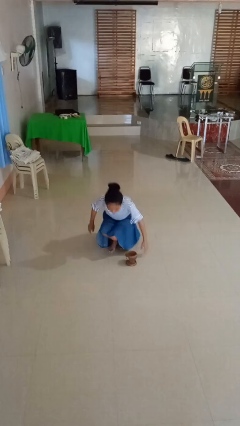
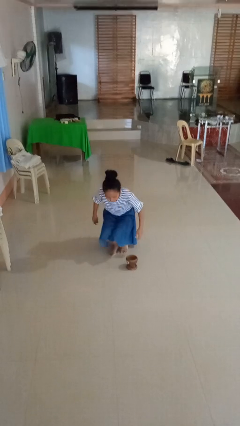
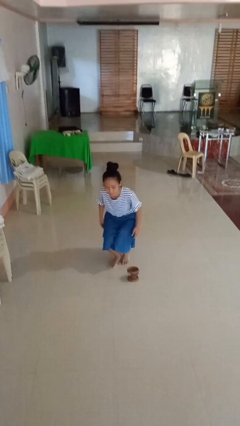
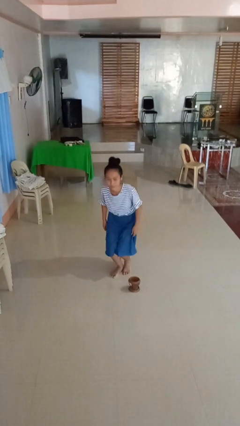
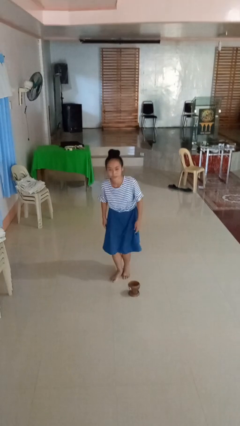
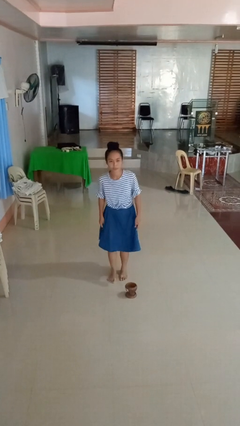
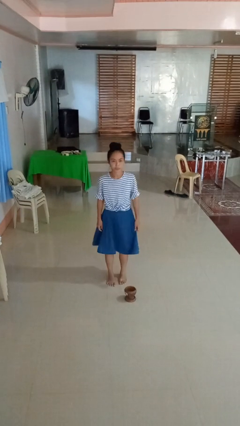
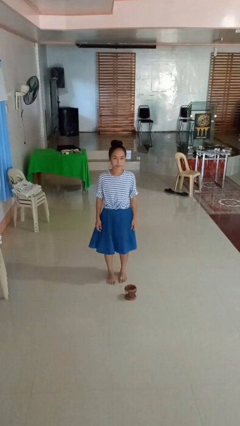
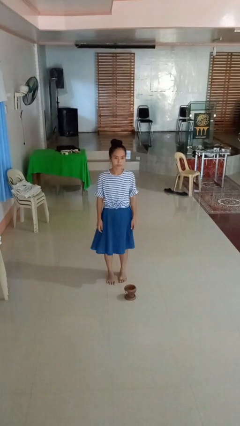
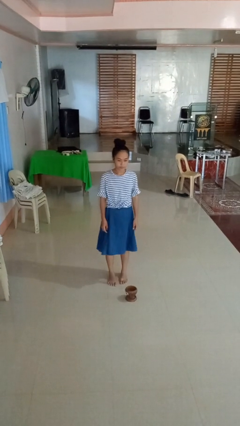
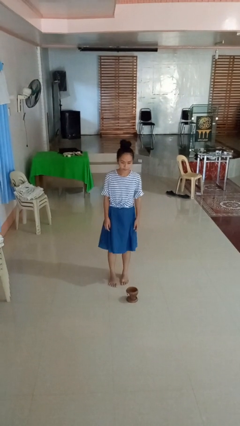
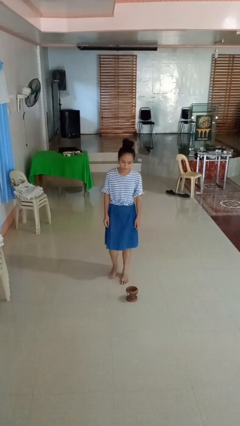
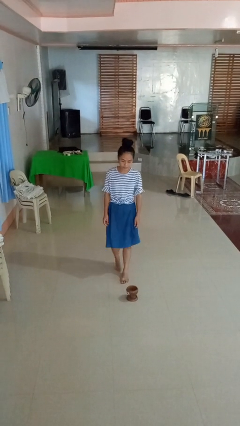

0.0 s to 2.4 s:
person stands up from floor

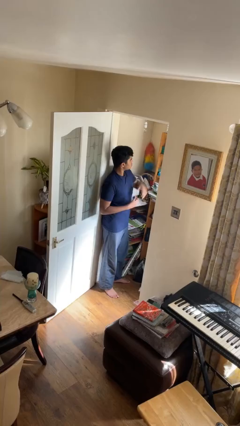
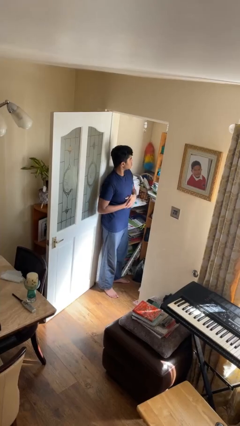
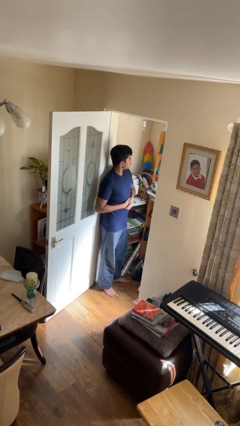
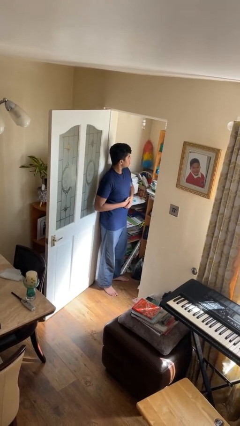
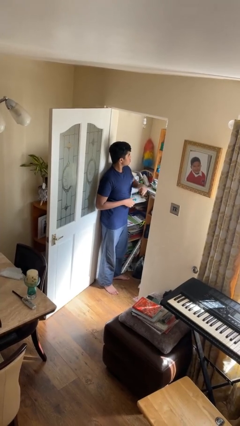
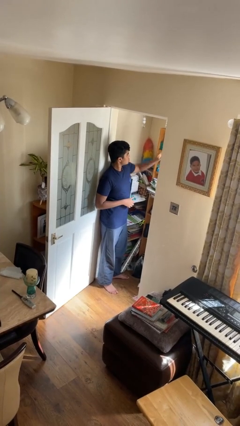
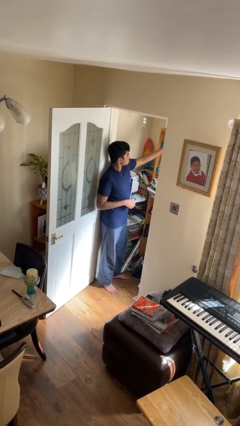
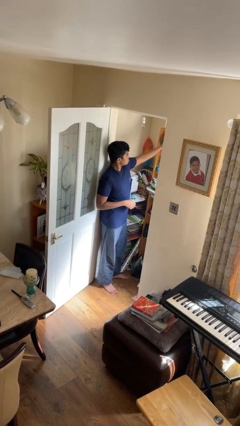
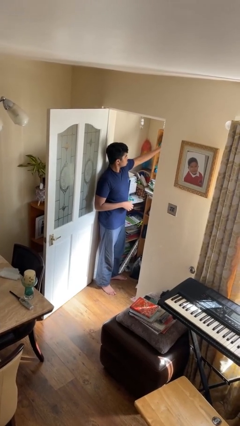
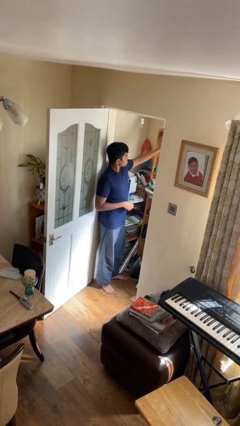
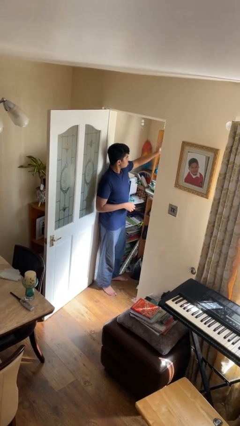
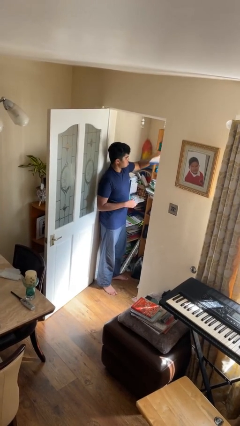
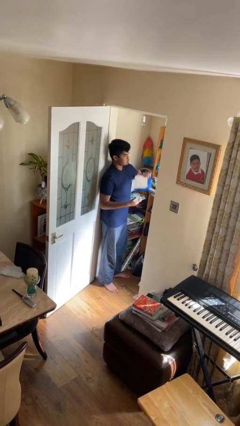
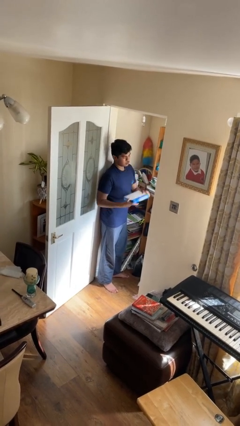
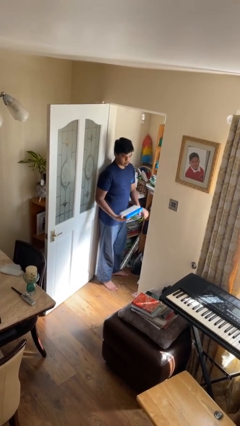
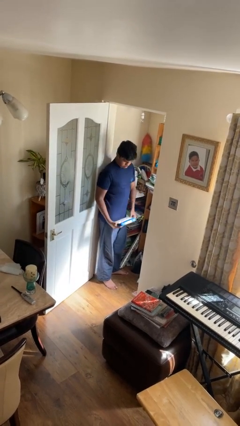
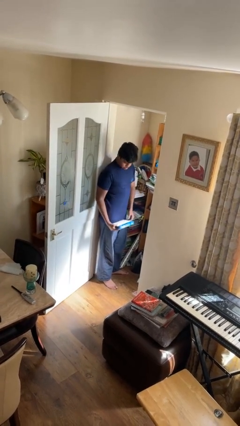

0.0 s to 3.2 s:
person picks up object from shelf

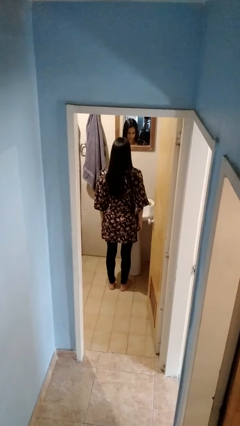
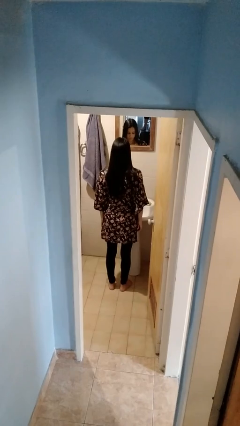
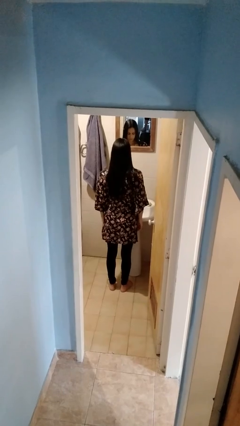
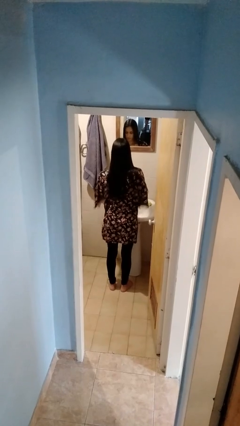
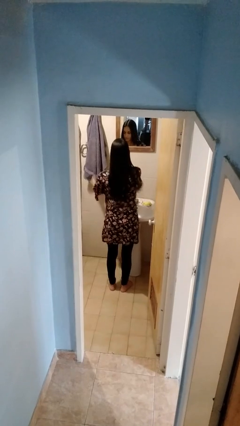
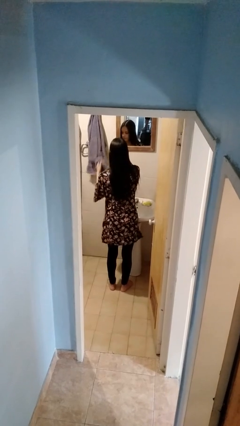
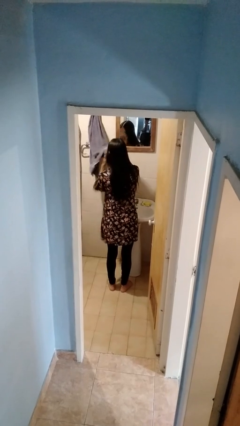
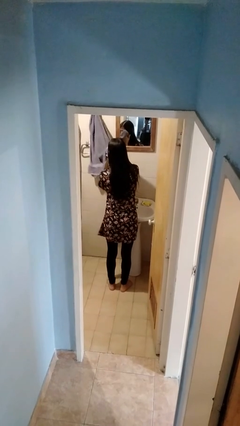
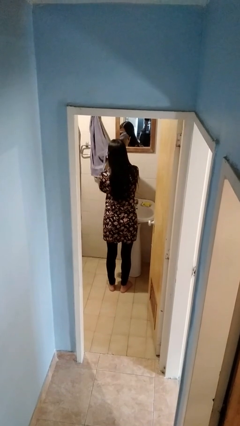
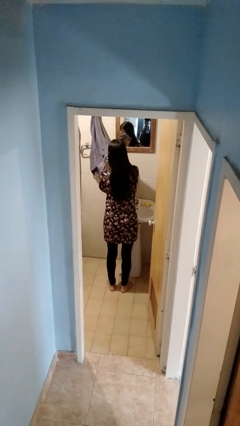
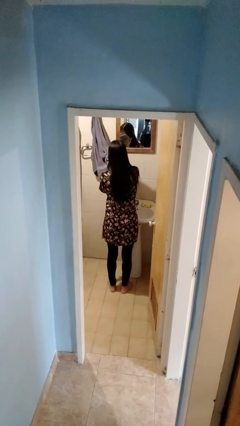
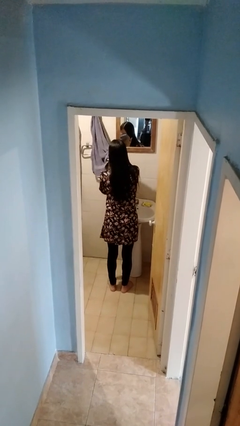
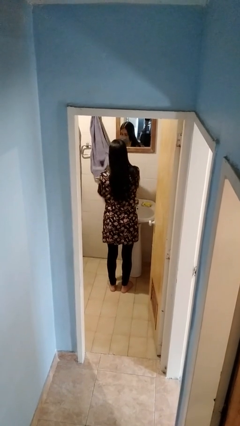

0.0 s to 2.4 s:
person dries face with towel

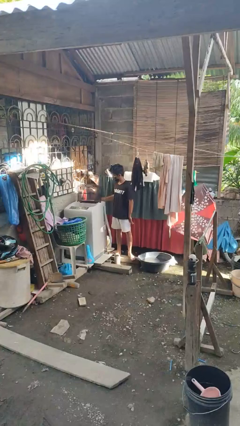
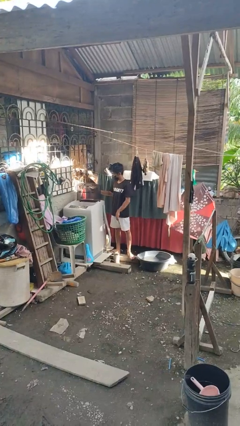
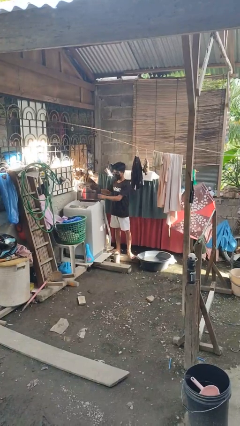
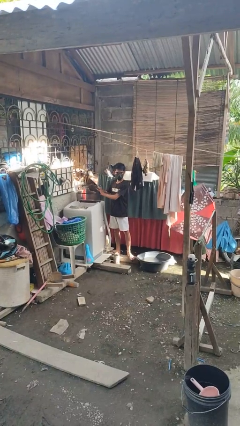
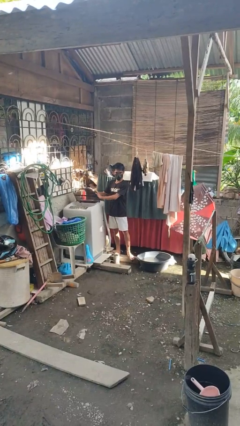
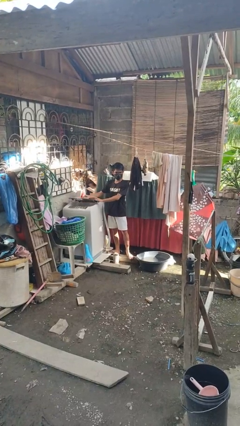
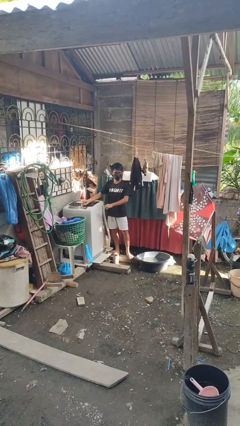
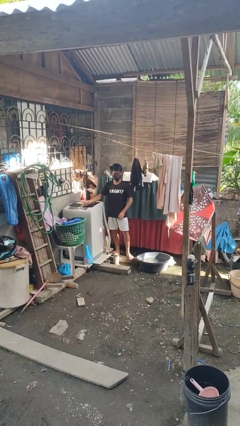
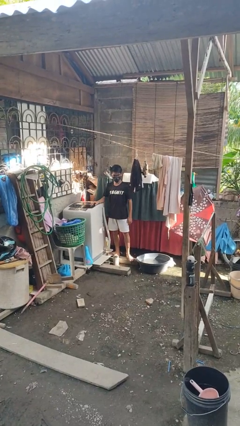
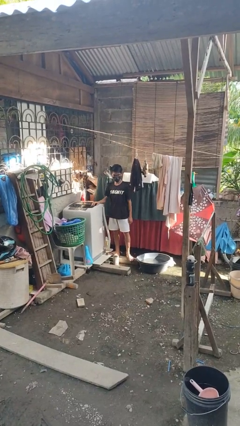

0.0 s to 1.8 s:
person closes clothes washer

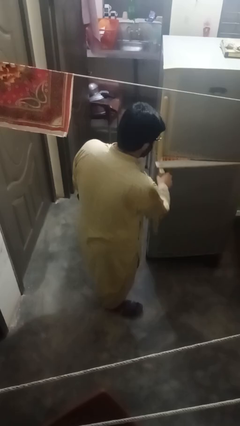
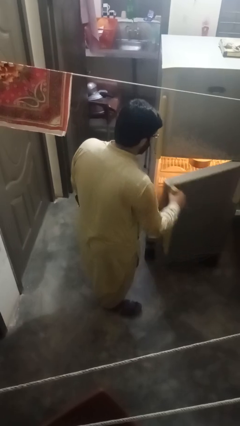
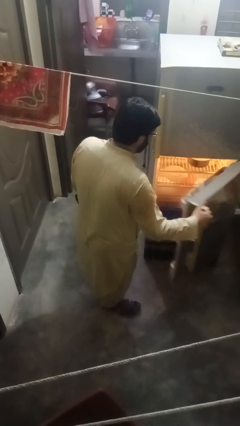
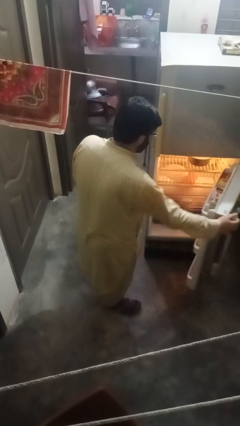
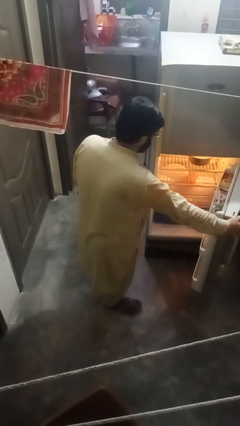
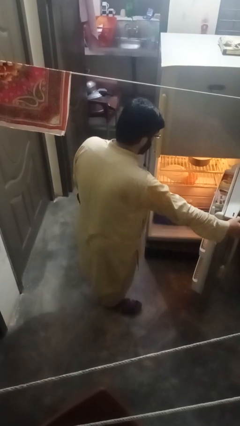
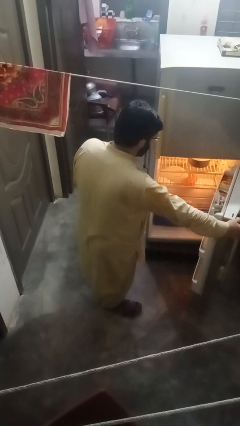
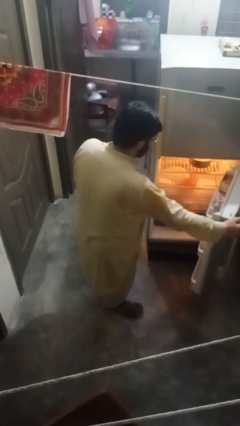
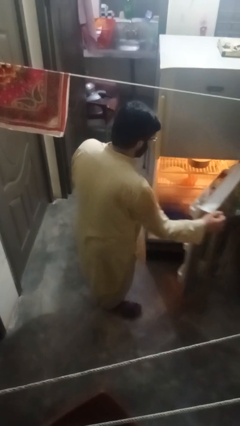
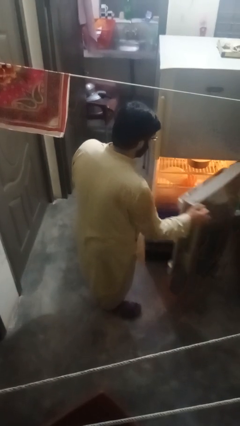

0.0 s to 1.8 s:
person opens refrigerator

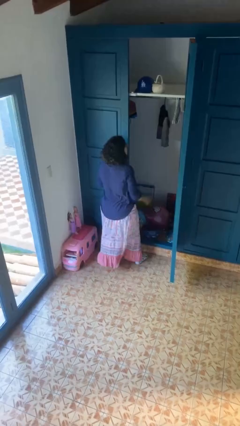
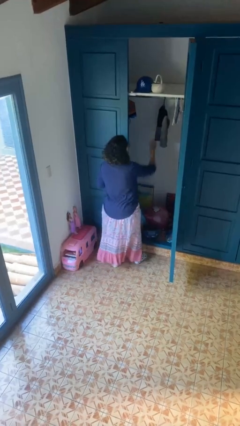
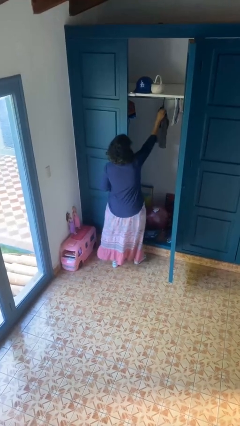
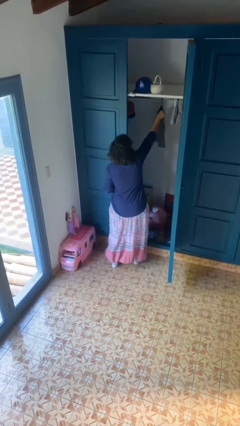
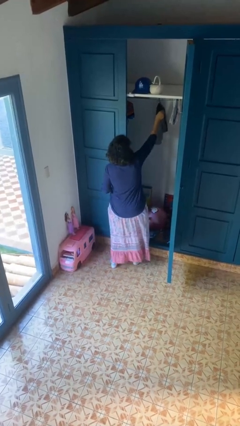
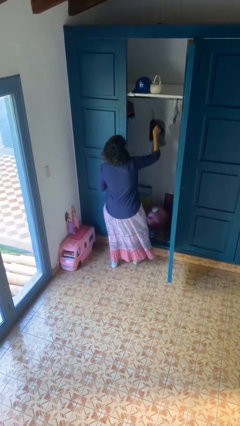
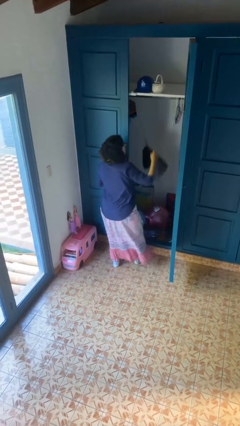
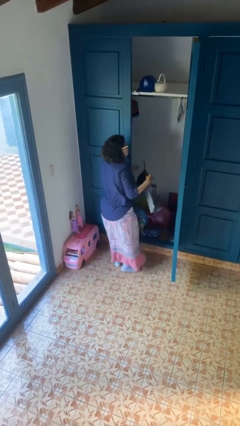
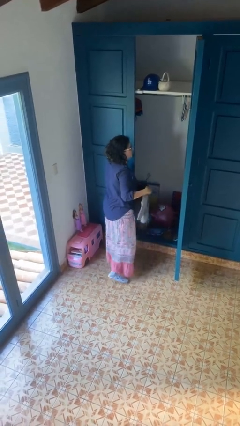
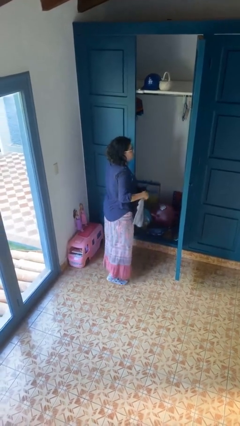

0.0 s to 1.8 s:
person takes clothes from closet

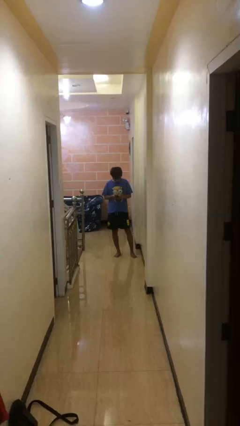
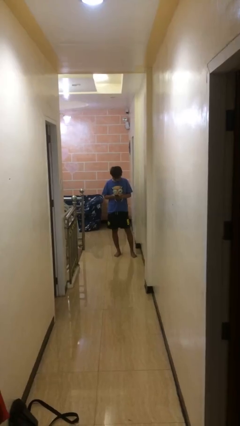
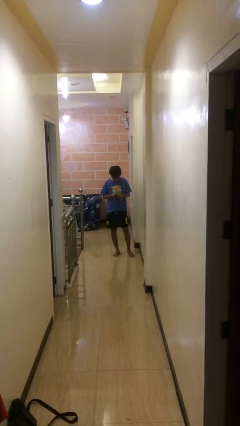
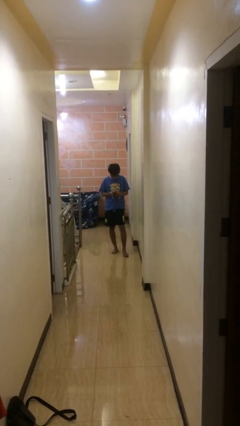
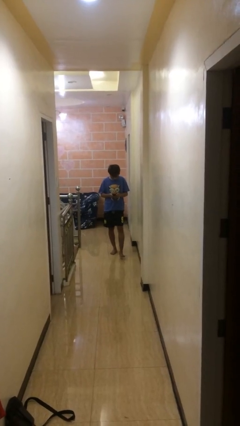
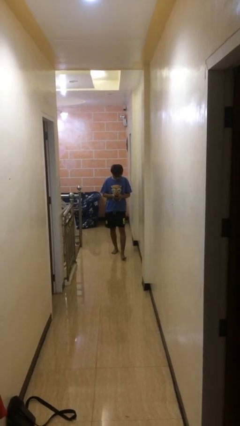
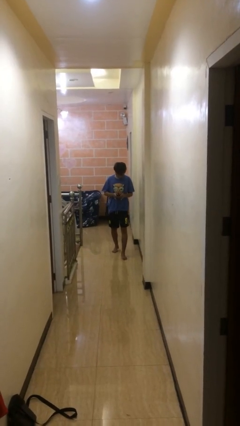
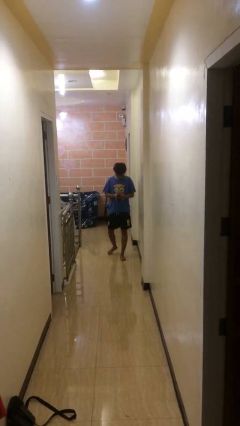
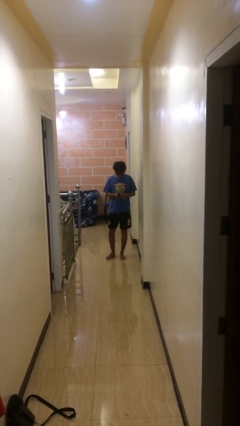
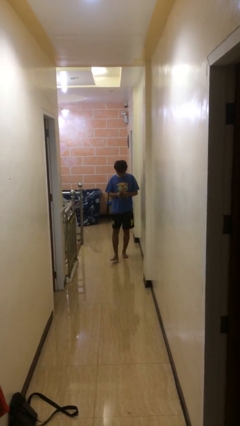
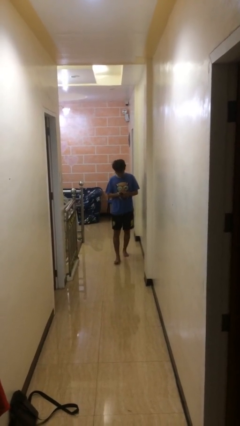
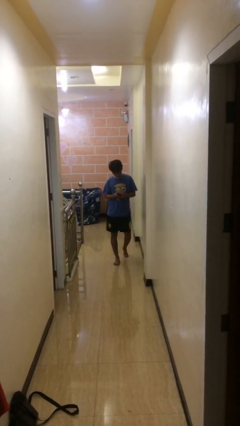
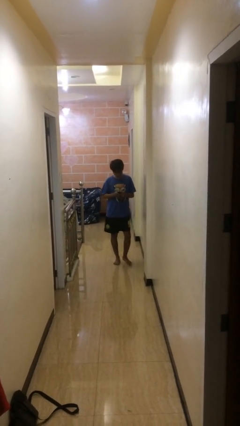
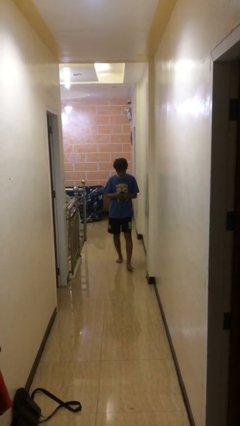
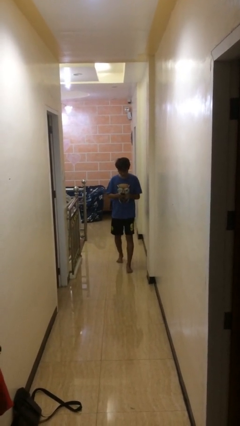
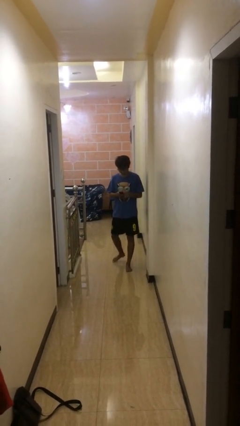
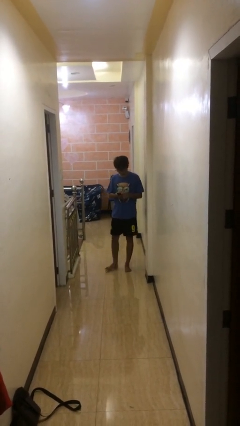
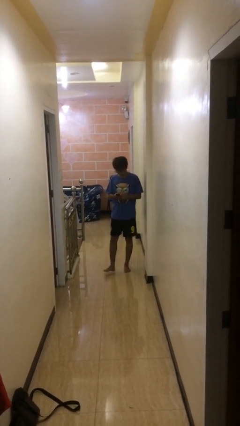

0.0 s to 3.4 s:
person texts on phone
